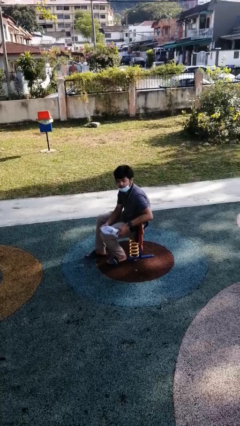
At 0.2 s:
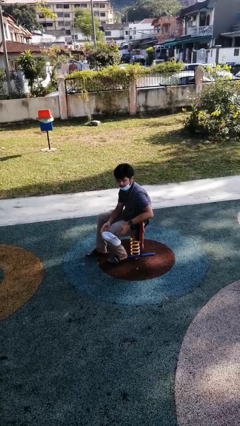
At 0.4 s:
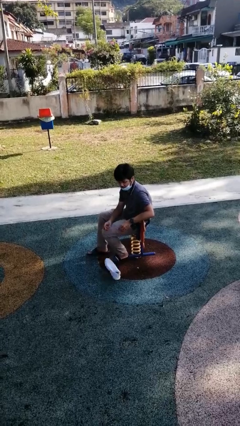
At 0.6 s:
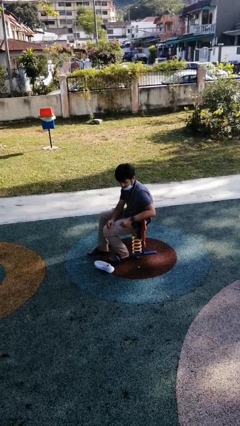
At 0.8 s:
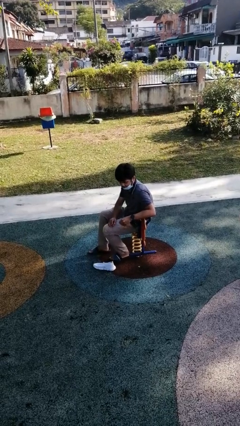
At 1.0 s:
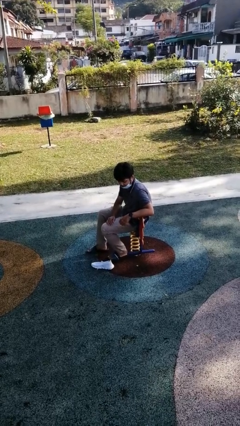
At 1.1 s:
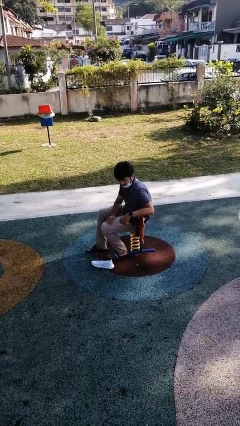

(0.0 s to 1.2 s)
person drops object

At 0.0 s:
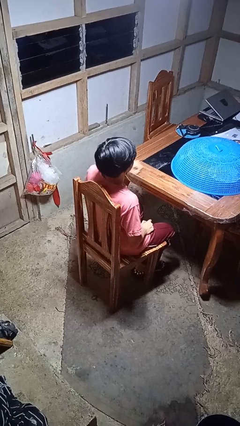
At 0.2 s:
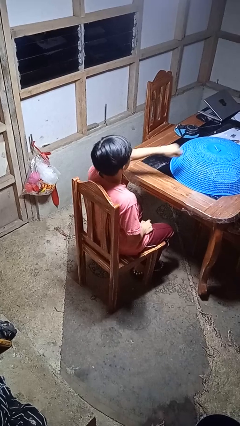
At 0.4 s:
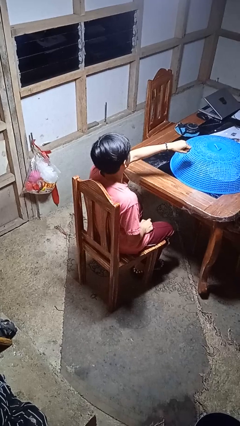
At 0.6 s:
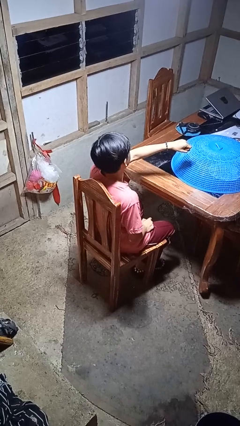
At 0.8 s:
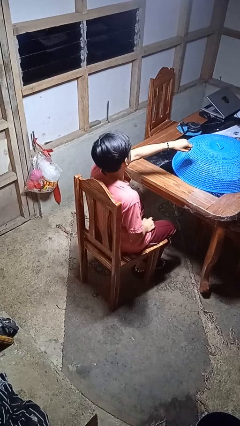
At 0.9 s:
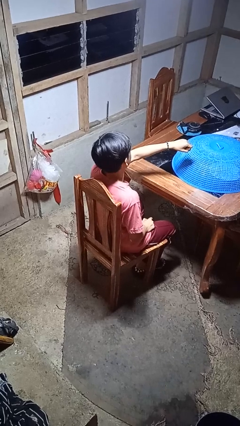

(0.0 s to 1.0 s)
person punches

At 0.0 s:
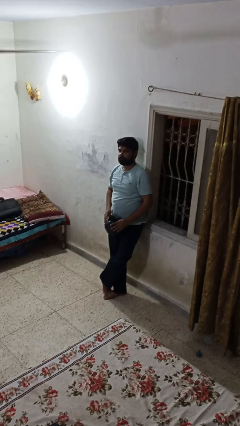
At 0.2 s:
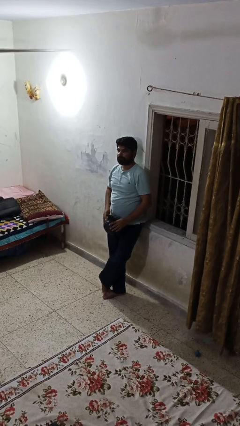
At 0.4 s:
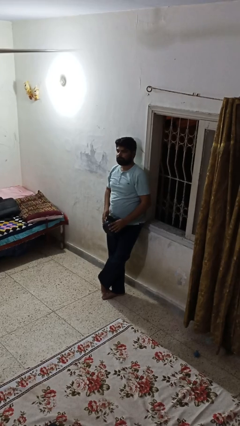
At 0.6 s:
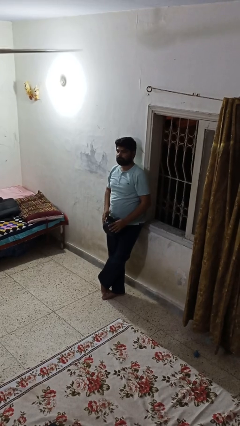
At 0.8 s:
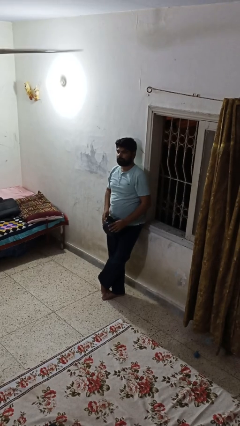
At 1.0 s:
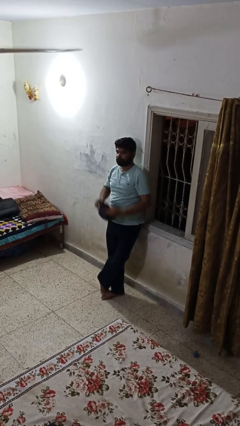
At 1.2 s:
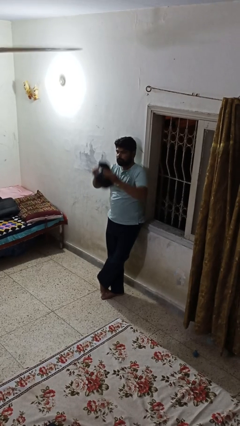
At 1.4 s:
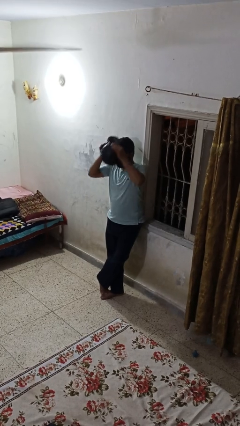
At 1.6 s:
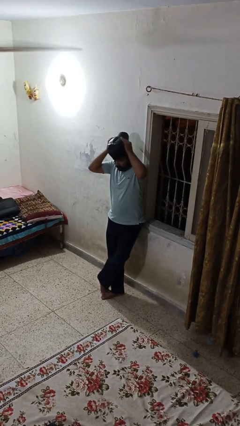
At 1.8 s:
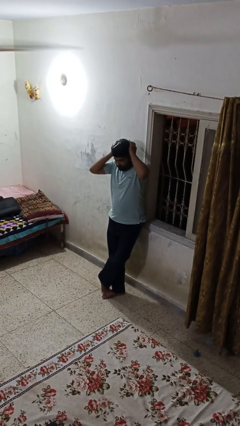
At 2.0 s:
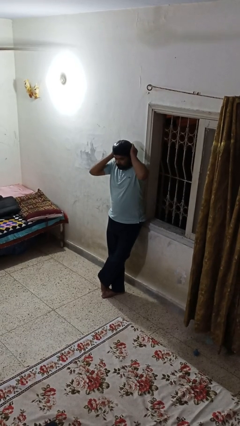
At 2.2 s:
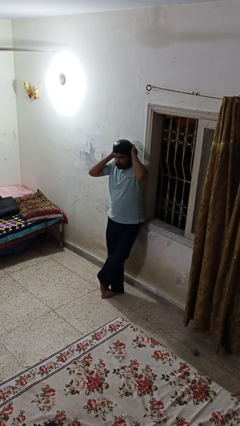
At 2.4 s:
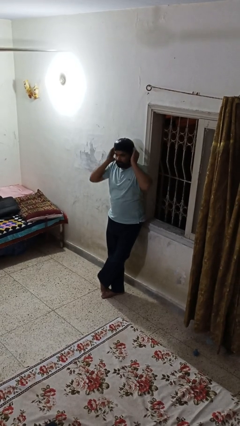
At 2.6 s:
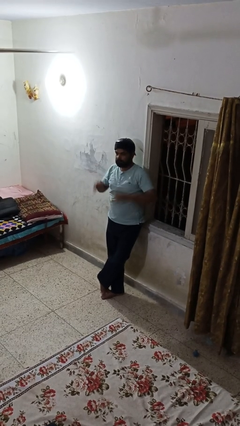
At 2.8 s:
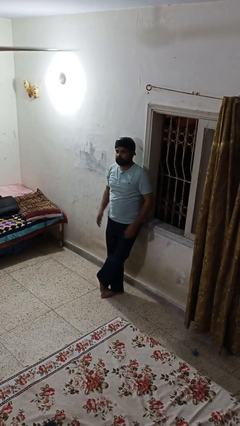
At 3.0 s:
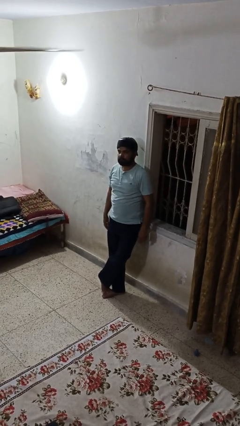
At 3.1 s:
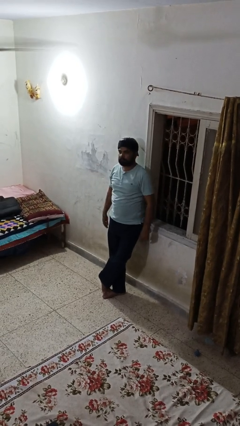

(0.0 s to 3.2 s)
person puts on hat

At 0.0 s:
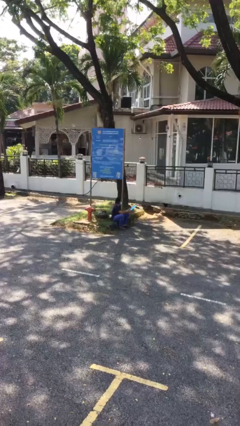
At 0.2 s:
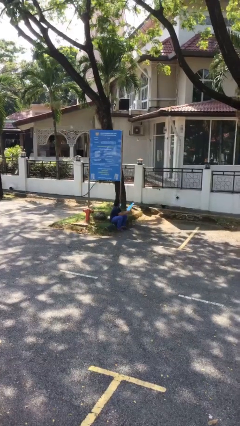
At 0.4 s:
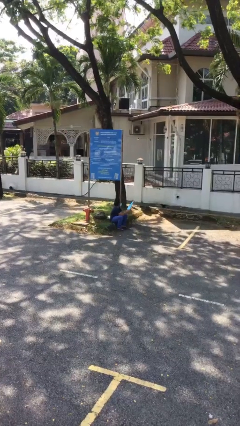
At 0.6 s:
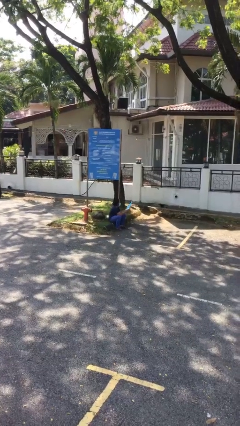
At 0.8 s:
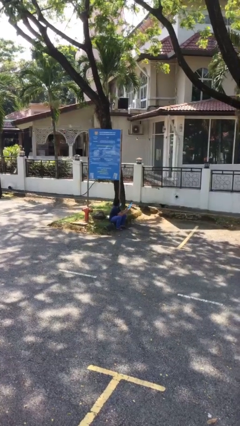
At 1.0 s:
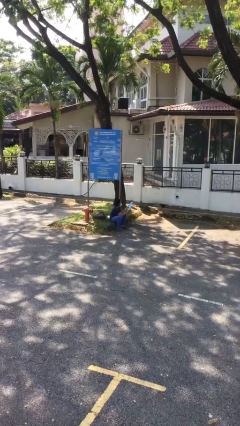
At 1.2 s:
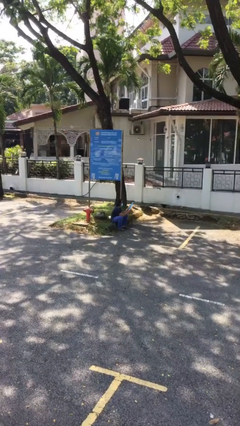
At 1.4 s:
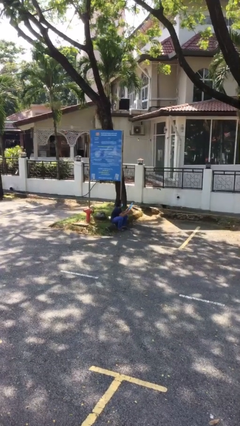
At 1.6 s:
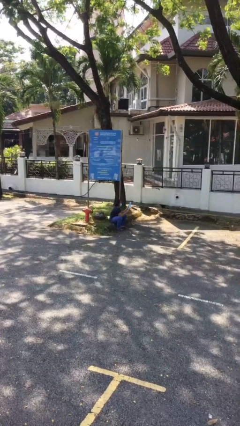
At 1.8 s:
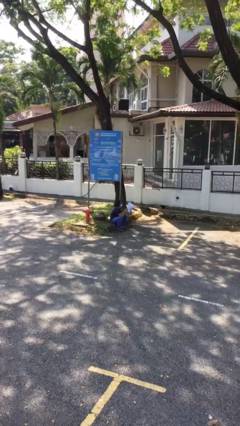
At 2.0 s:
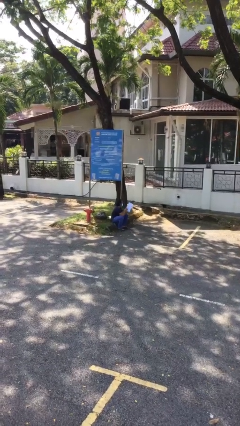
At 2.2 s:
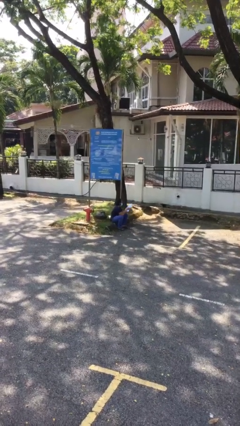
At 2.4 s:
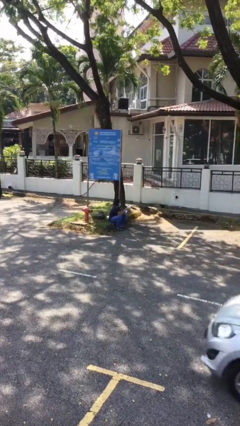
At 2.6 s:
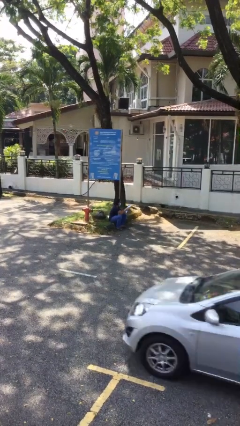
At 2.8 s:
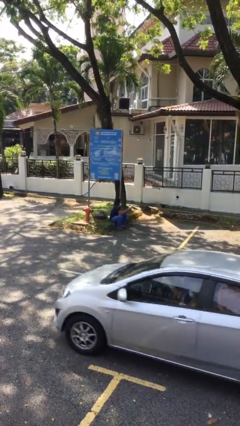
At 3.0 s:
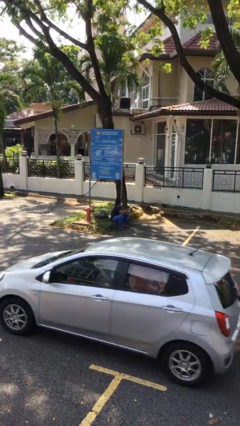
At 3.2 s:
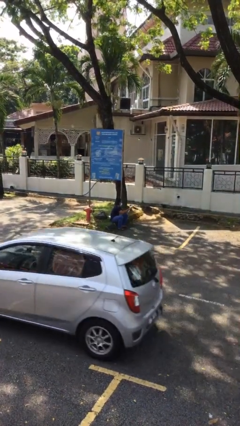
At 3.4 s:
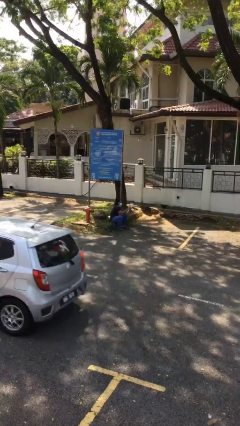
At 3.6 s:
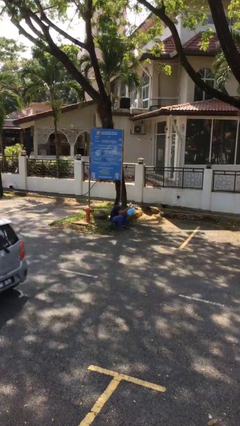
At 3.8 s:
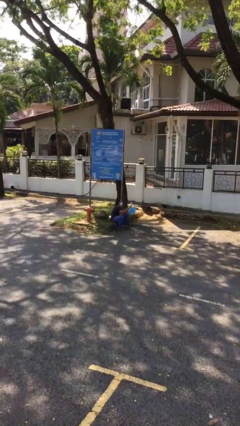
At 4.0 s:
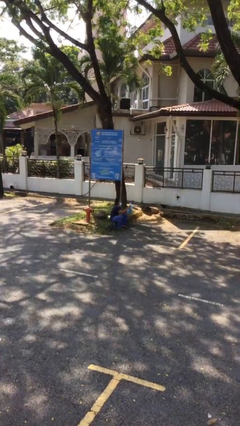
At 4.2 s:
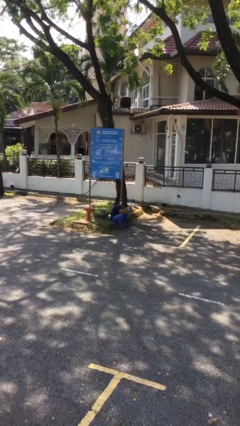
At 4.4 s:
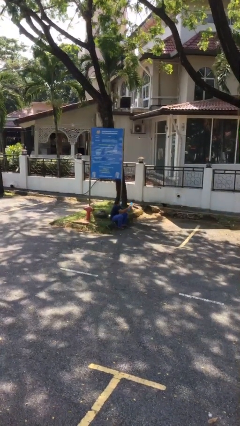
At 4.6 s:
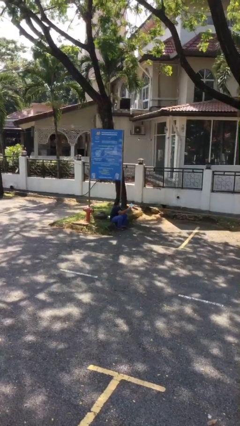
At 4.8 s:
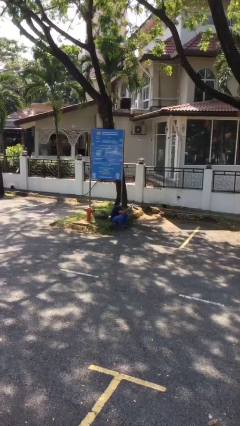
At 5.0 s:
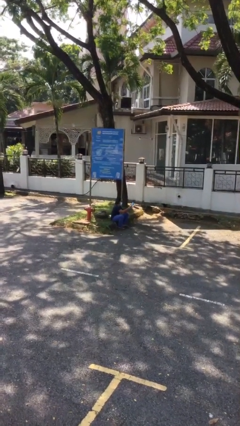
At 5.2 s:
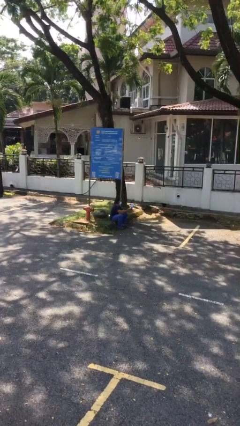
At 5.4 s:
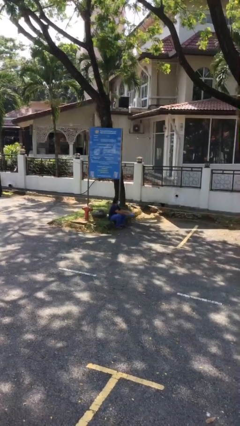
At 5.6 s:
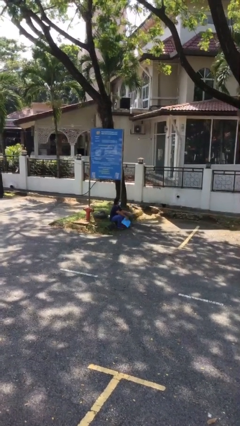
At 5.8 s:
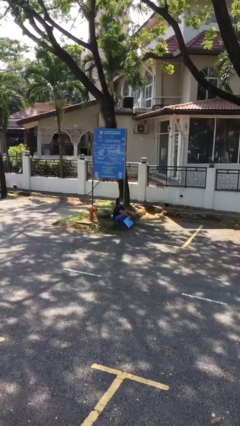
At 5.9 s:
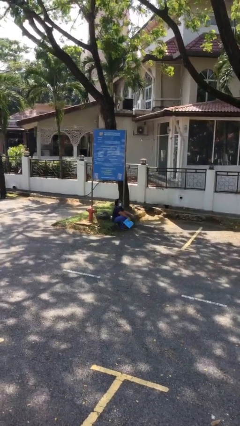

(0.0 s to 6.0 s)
person reads document

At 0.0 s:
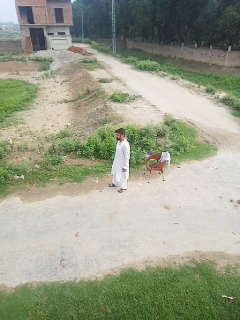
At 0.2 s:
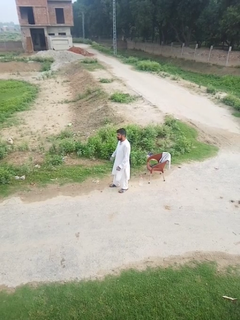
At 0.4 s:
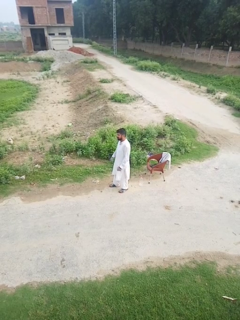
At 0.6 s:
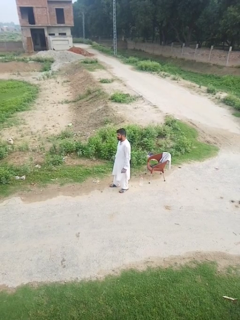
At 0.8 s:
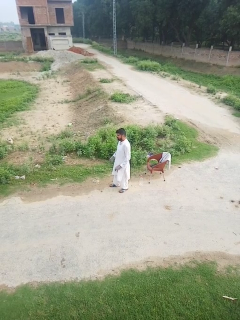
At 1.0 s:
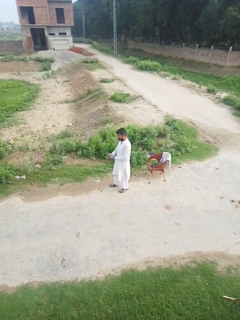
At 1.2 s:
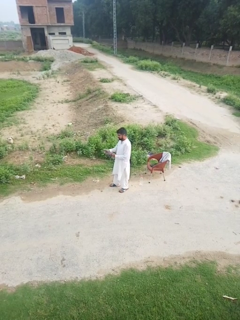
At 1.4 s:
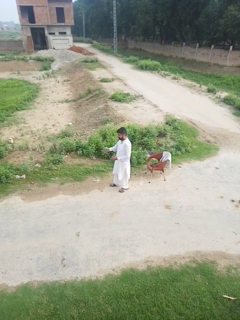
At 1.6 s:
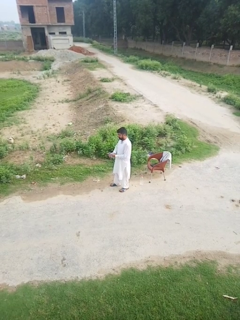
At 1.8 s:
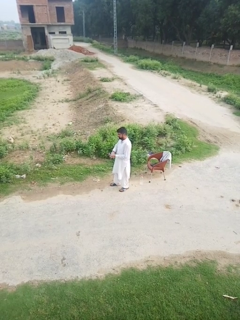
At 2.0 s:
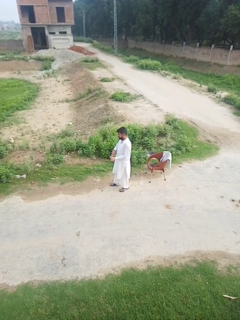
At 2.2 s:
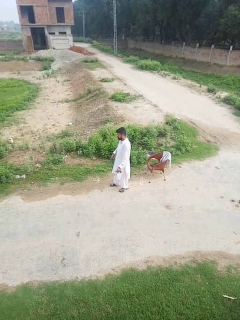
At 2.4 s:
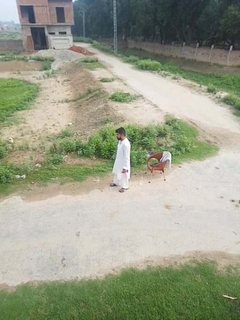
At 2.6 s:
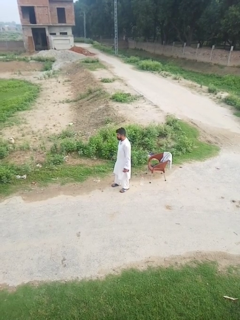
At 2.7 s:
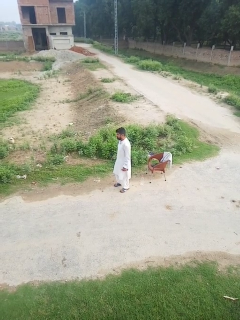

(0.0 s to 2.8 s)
person takes off gloves

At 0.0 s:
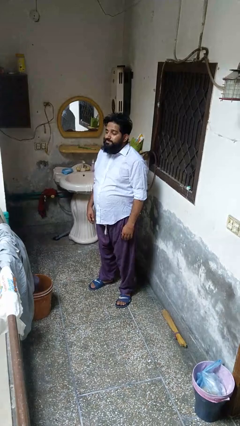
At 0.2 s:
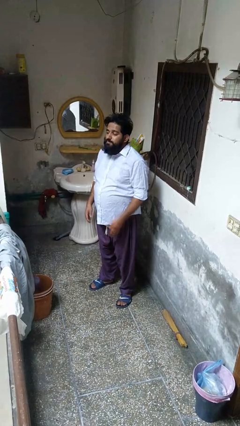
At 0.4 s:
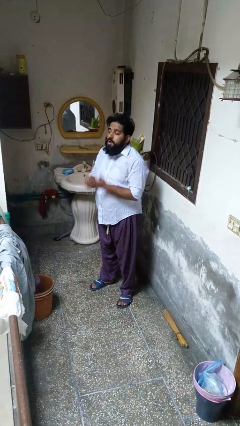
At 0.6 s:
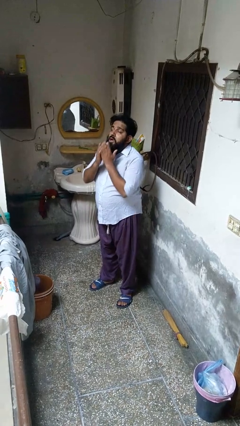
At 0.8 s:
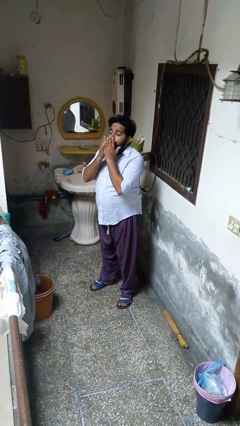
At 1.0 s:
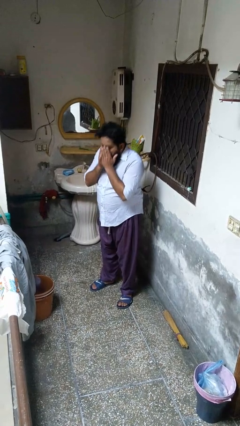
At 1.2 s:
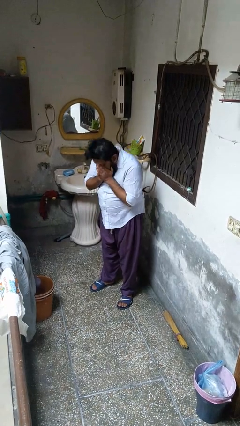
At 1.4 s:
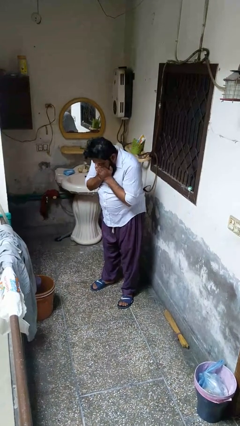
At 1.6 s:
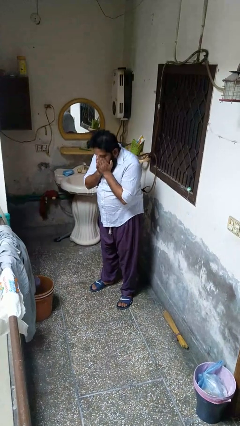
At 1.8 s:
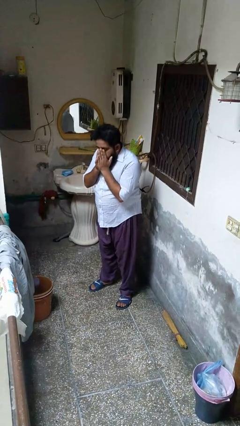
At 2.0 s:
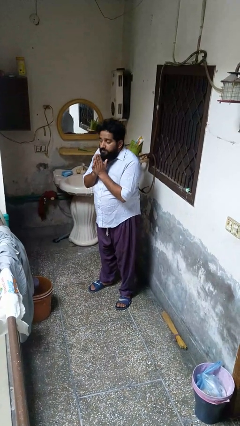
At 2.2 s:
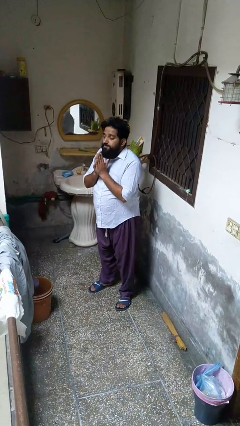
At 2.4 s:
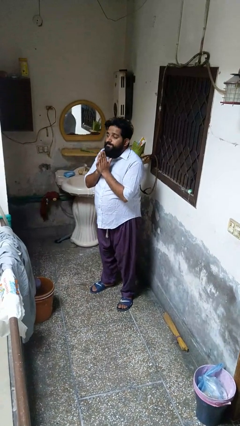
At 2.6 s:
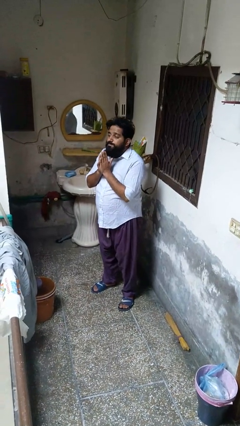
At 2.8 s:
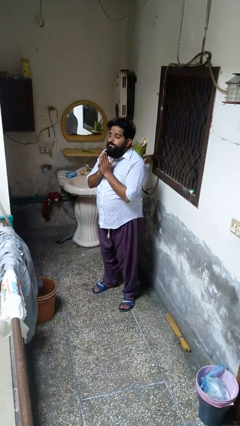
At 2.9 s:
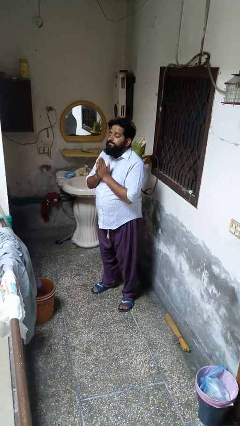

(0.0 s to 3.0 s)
person sneezes into hand

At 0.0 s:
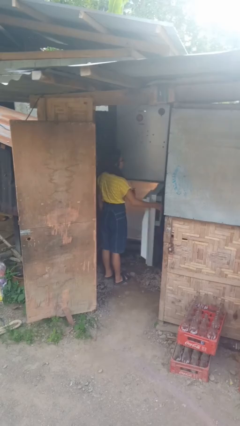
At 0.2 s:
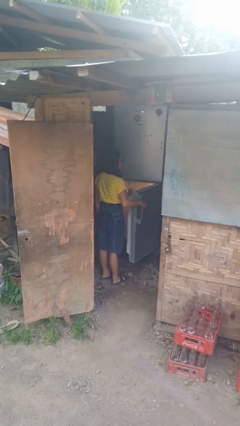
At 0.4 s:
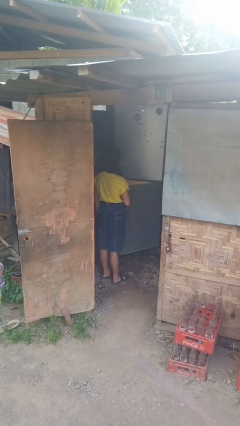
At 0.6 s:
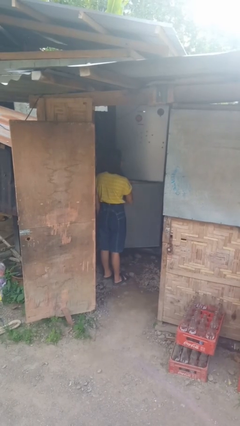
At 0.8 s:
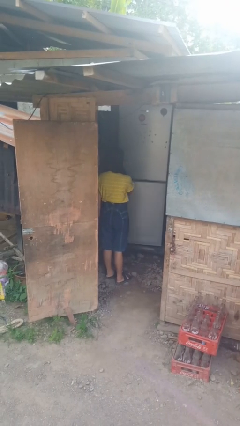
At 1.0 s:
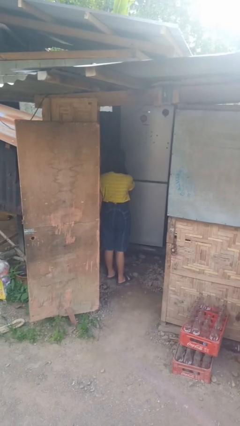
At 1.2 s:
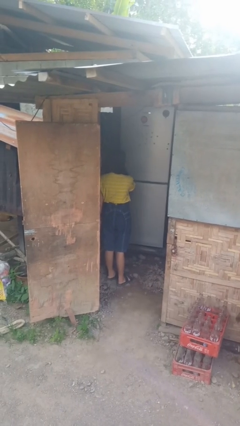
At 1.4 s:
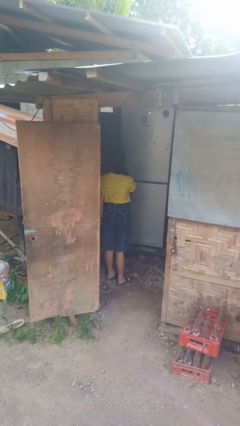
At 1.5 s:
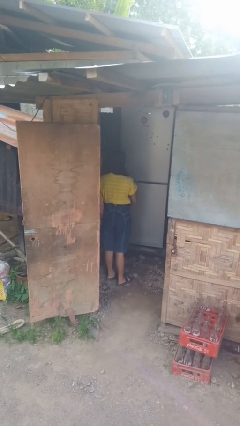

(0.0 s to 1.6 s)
person closes refrigerator